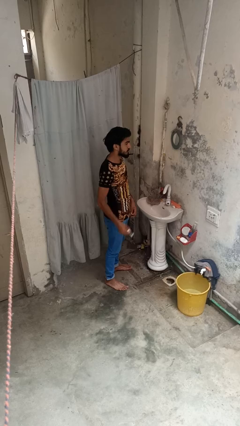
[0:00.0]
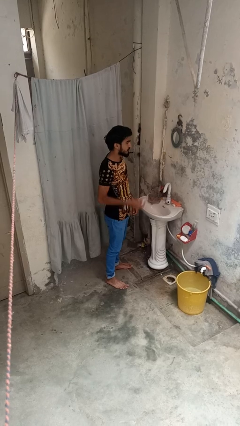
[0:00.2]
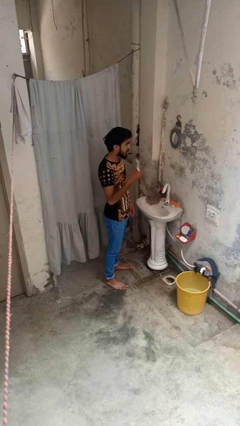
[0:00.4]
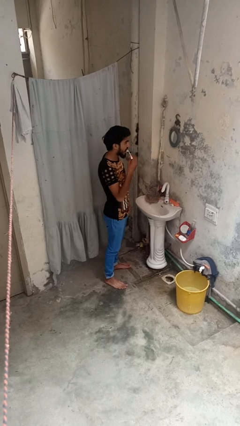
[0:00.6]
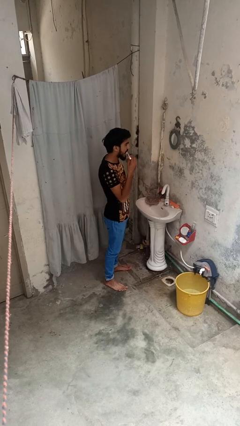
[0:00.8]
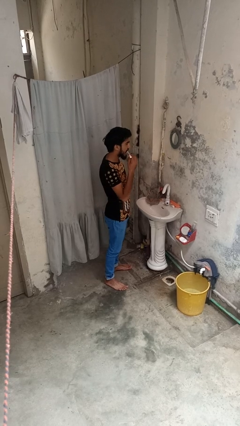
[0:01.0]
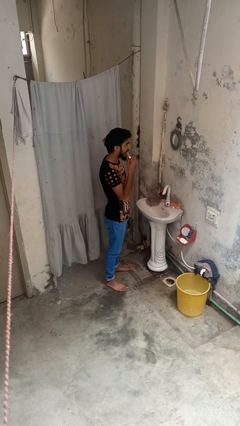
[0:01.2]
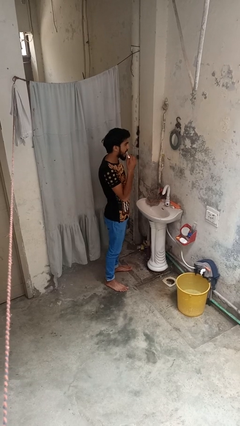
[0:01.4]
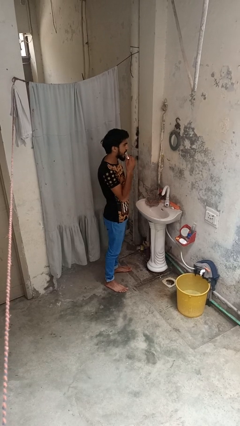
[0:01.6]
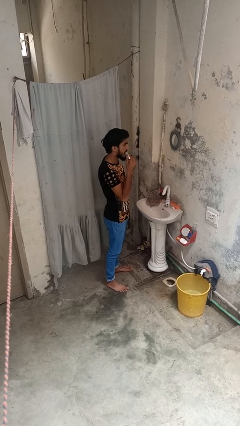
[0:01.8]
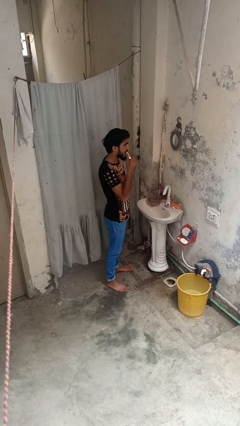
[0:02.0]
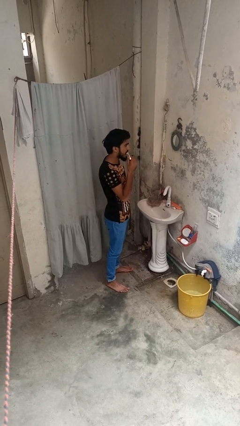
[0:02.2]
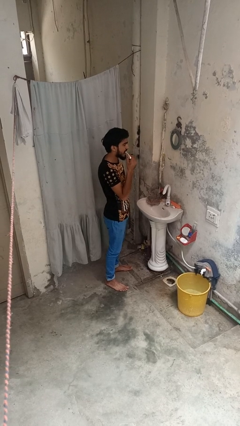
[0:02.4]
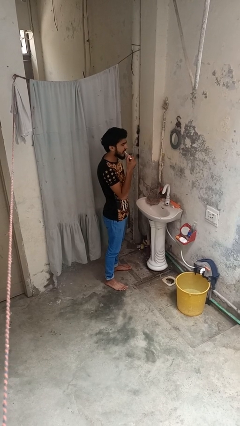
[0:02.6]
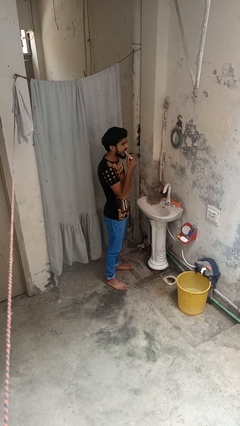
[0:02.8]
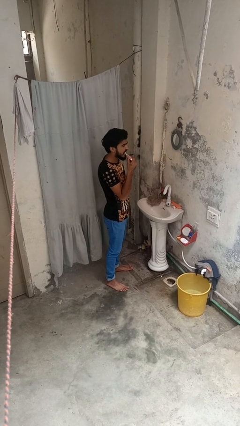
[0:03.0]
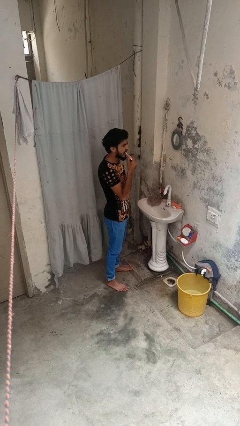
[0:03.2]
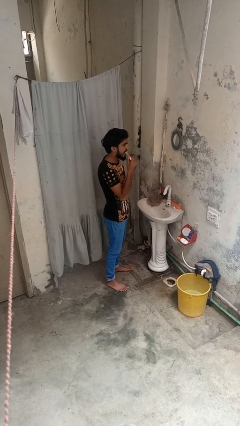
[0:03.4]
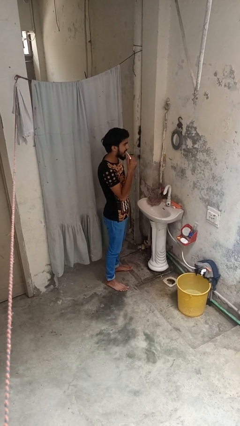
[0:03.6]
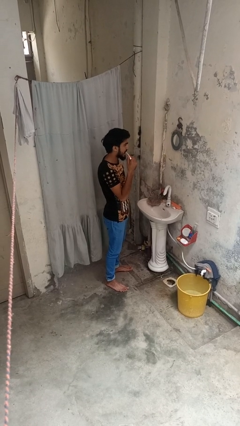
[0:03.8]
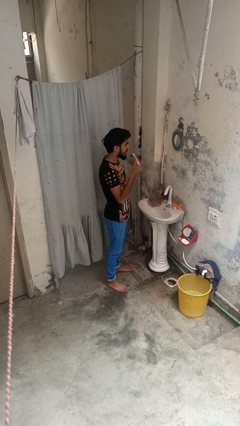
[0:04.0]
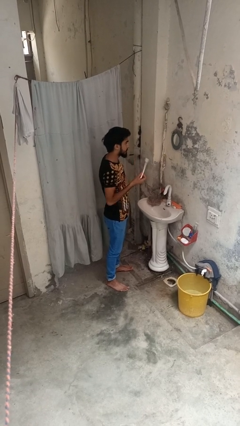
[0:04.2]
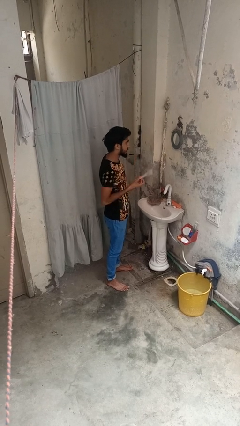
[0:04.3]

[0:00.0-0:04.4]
person brushes teeth

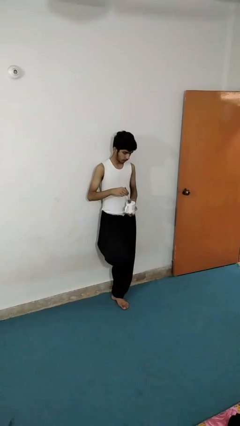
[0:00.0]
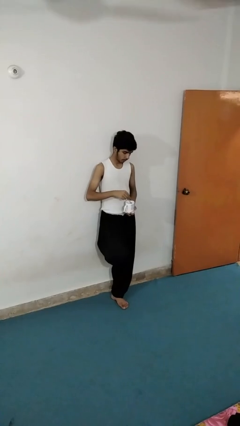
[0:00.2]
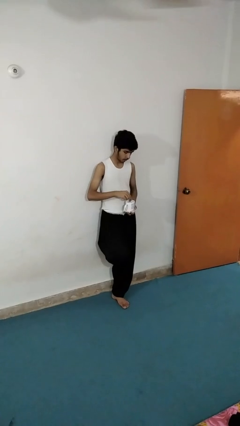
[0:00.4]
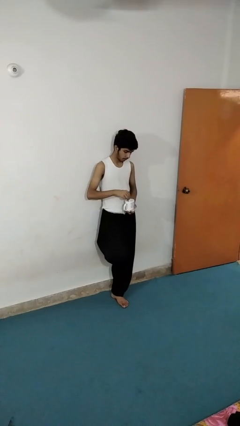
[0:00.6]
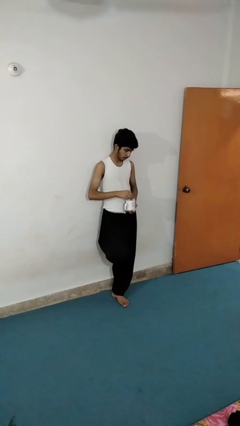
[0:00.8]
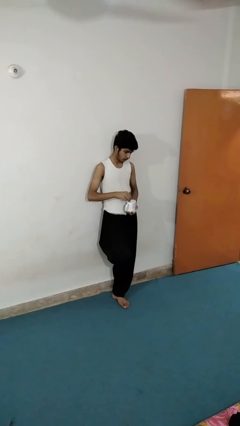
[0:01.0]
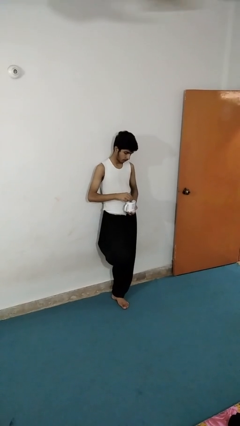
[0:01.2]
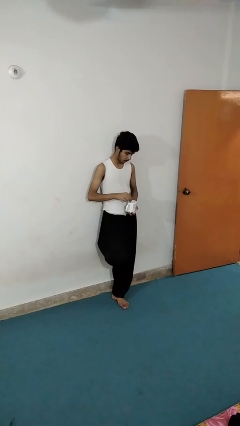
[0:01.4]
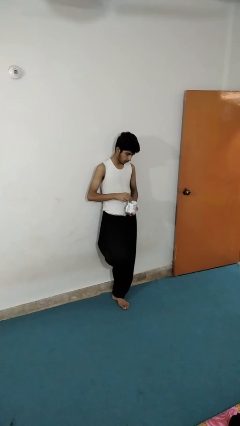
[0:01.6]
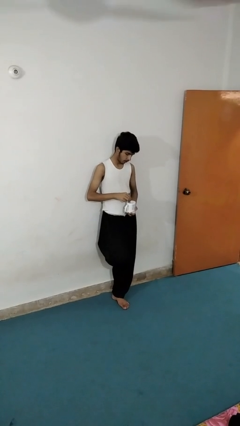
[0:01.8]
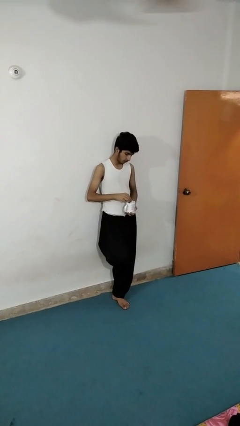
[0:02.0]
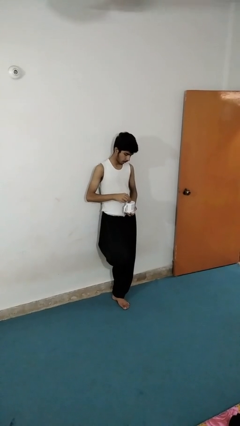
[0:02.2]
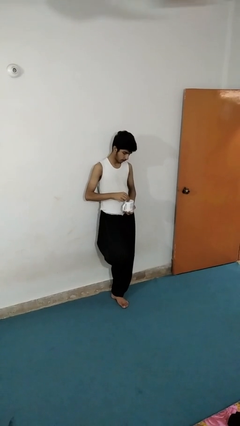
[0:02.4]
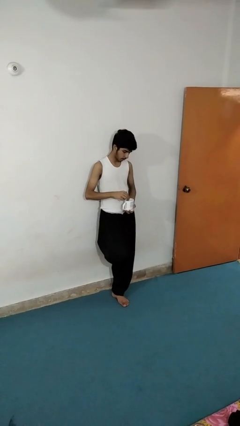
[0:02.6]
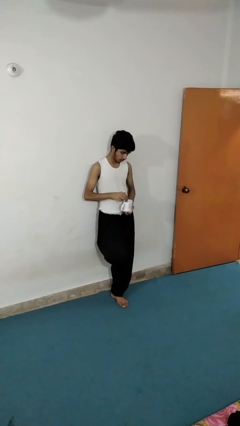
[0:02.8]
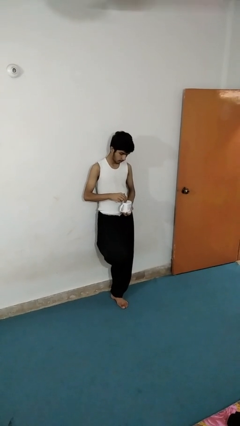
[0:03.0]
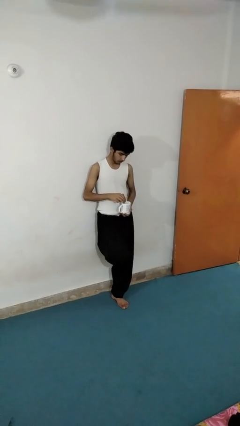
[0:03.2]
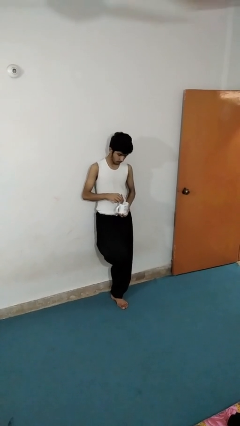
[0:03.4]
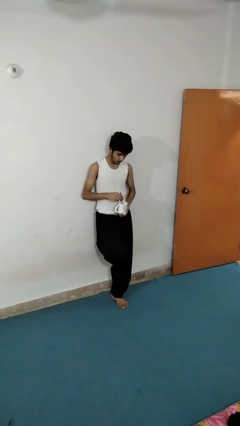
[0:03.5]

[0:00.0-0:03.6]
person stirs mug

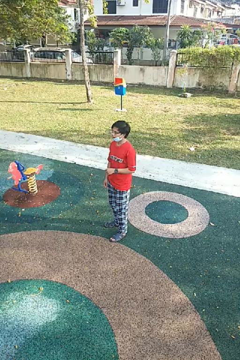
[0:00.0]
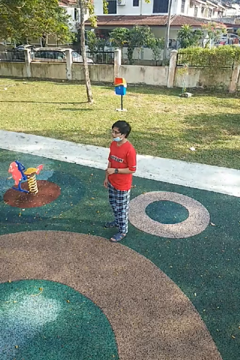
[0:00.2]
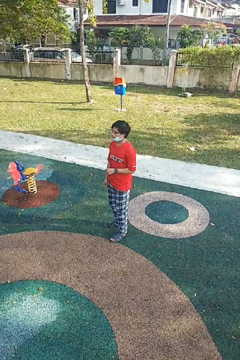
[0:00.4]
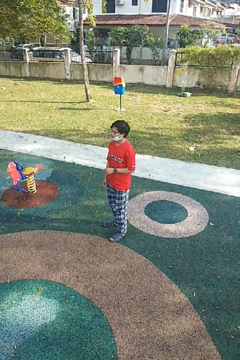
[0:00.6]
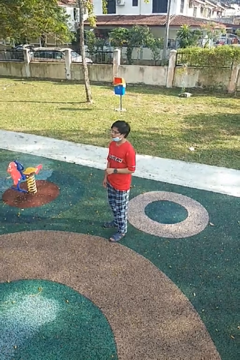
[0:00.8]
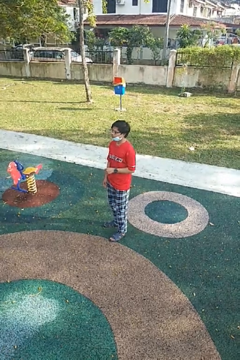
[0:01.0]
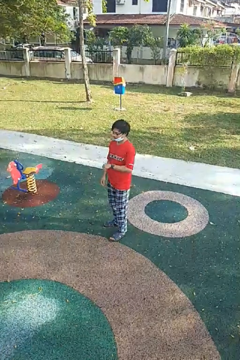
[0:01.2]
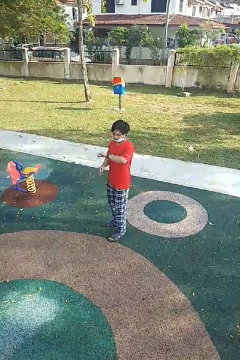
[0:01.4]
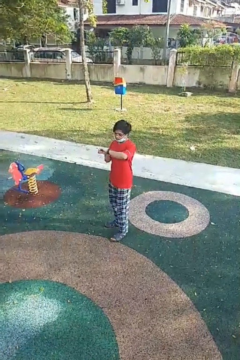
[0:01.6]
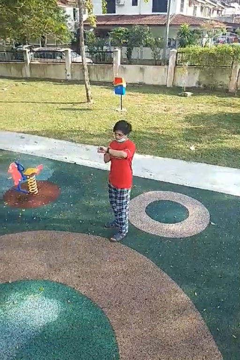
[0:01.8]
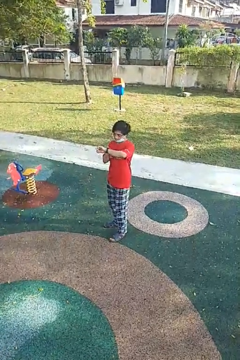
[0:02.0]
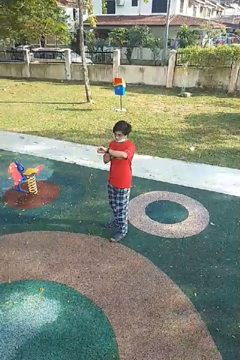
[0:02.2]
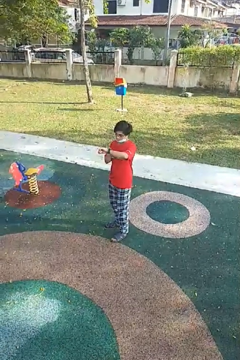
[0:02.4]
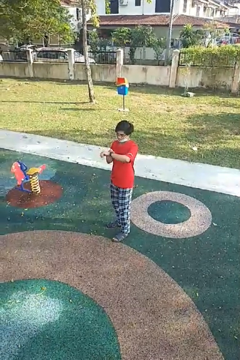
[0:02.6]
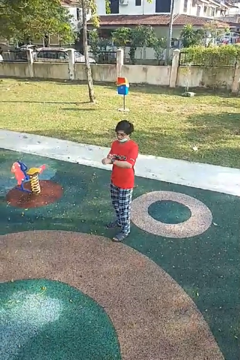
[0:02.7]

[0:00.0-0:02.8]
person looks at wristwatch

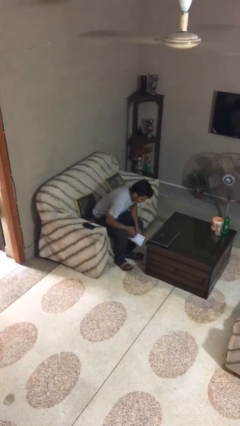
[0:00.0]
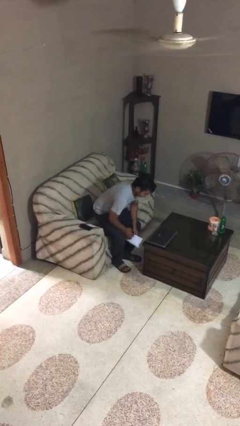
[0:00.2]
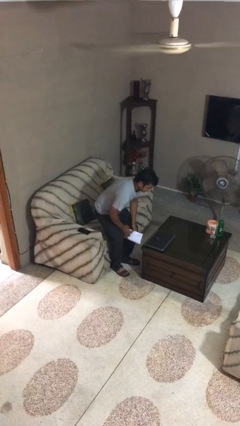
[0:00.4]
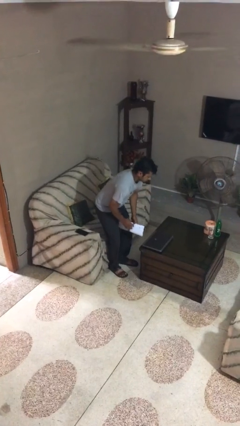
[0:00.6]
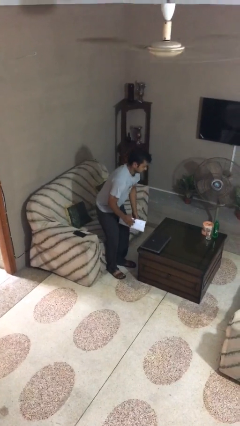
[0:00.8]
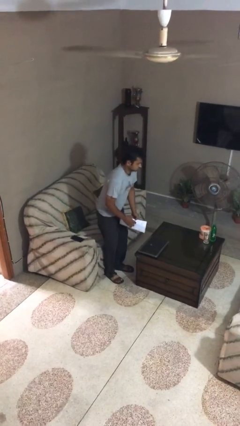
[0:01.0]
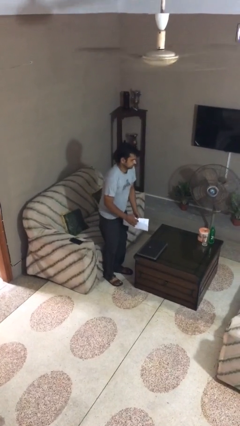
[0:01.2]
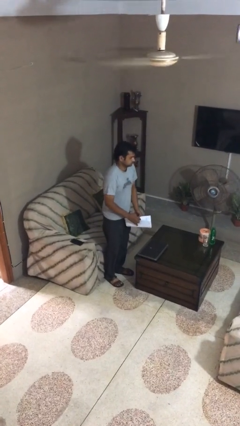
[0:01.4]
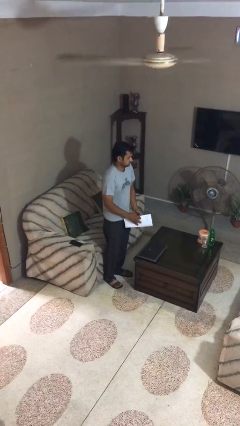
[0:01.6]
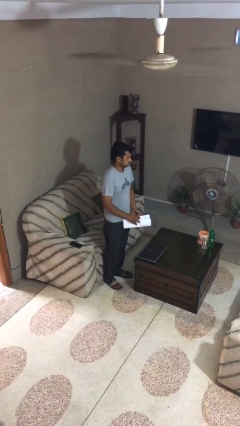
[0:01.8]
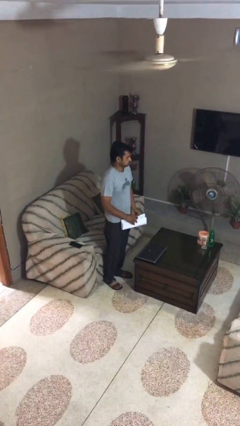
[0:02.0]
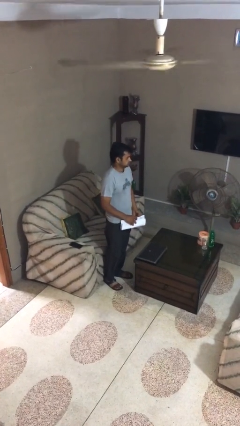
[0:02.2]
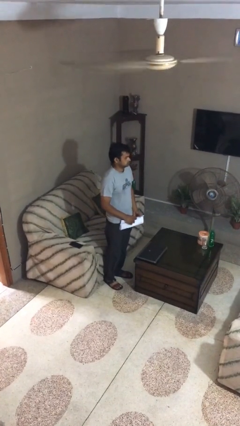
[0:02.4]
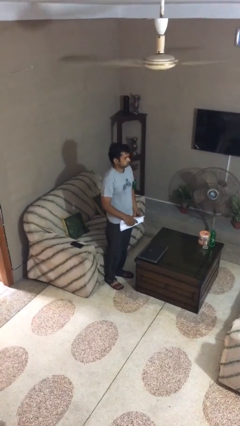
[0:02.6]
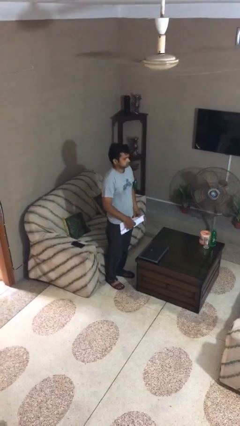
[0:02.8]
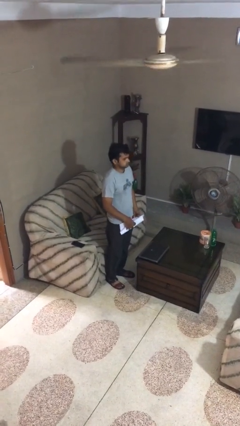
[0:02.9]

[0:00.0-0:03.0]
person stands up

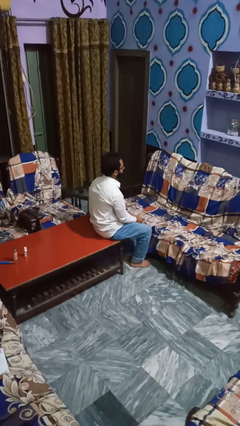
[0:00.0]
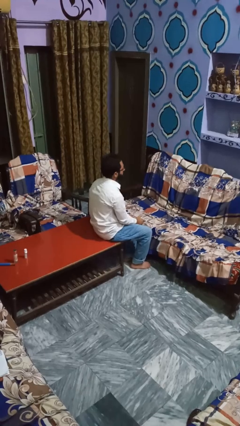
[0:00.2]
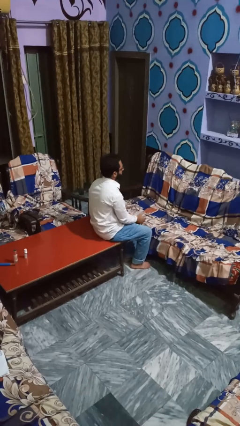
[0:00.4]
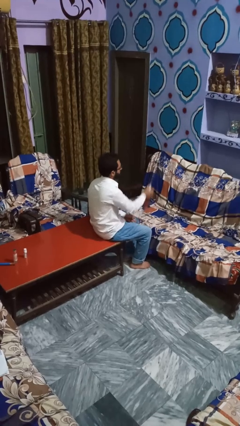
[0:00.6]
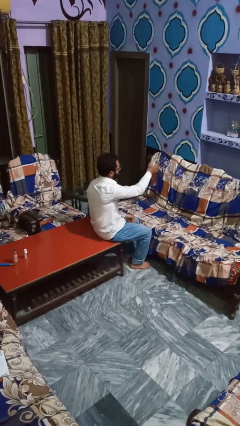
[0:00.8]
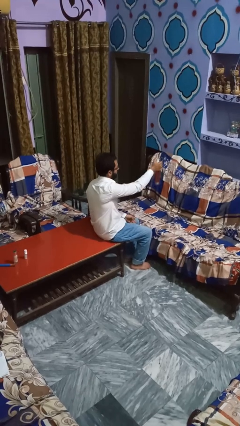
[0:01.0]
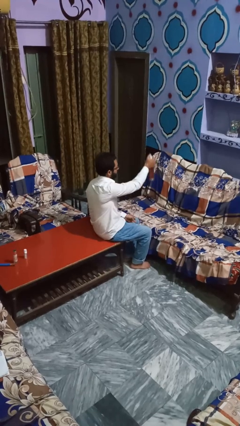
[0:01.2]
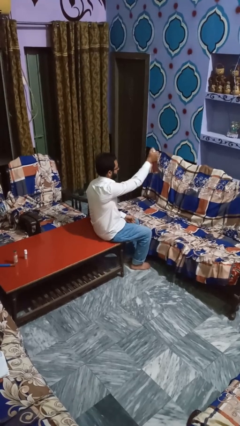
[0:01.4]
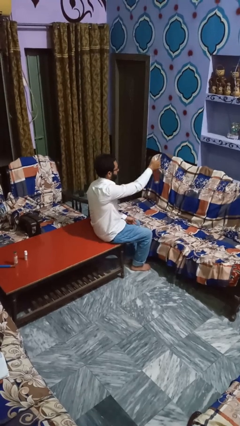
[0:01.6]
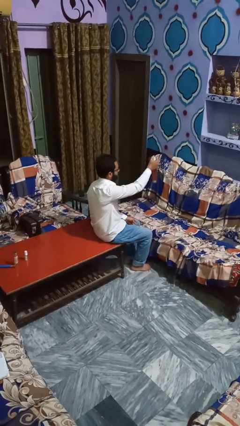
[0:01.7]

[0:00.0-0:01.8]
person sprays from bottle

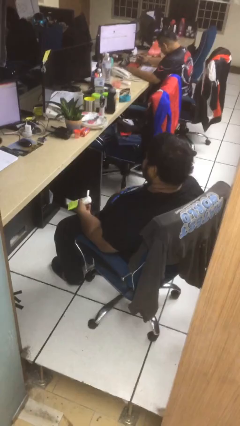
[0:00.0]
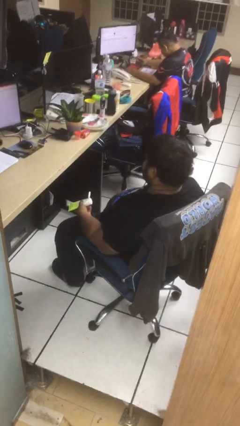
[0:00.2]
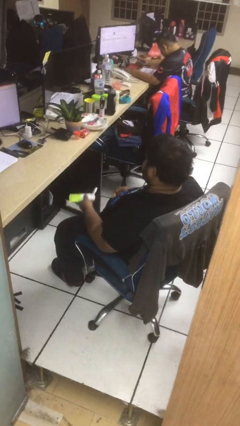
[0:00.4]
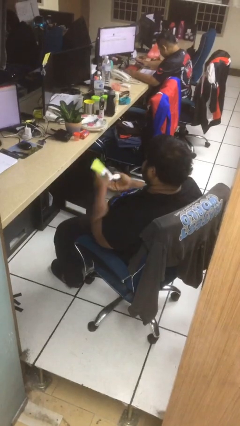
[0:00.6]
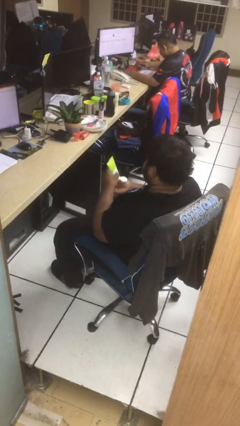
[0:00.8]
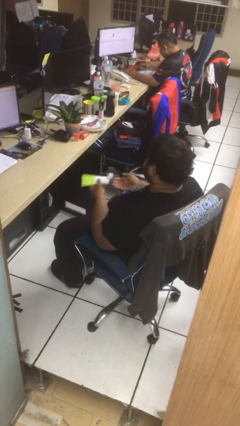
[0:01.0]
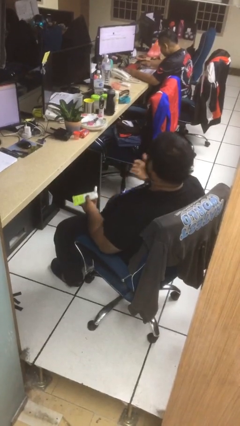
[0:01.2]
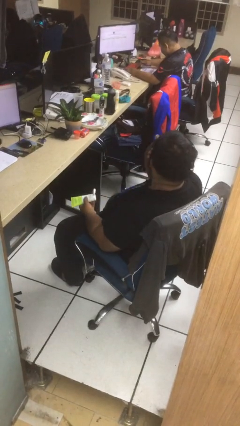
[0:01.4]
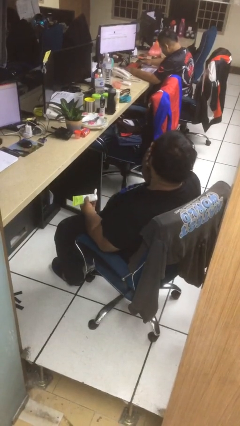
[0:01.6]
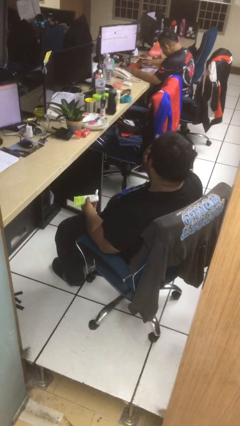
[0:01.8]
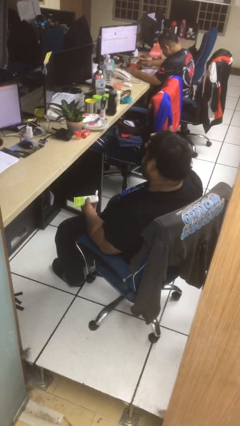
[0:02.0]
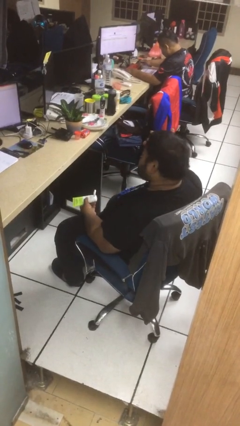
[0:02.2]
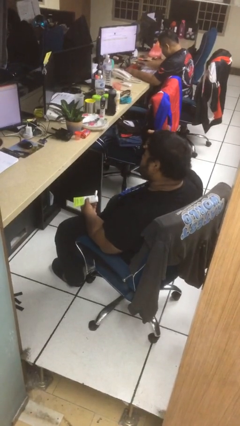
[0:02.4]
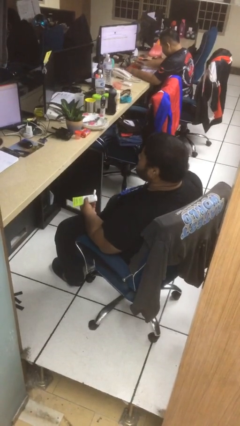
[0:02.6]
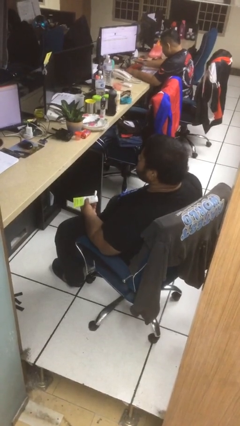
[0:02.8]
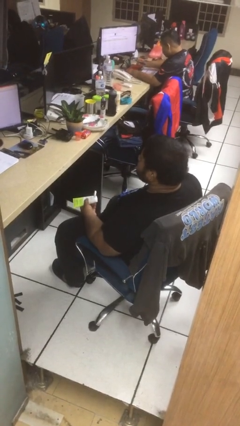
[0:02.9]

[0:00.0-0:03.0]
person applies sunscreen
